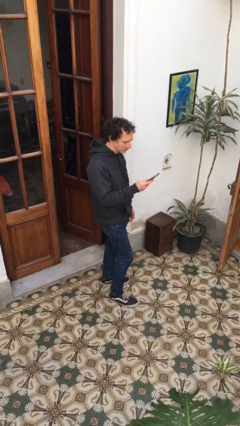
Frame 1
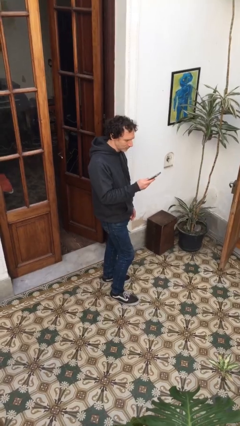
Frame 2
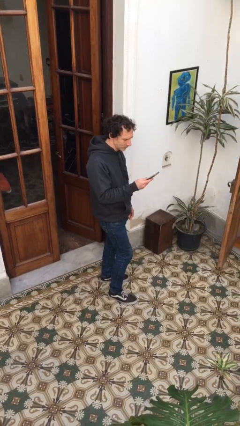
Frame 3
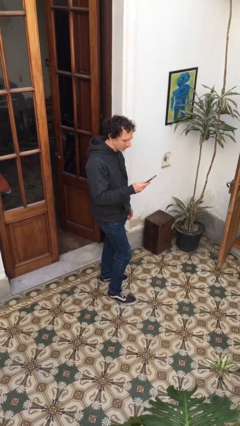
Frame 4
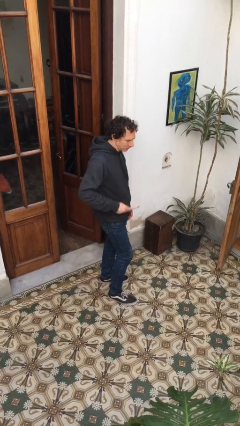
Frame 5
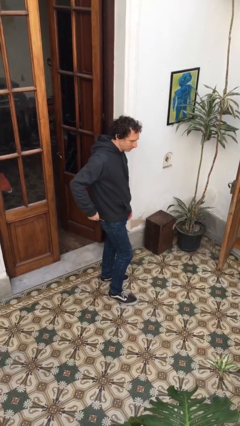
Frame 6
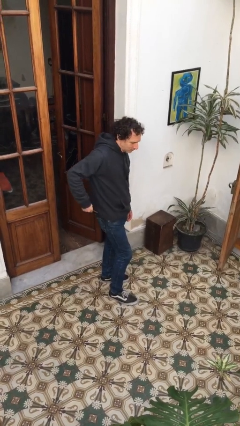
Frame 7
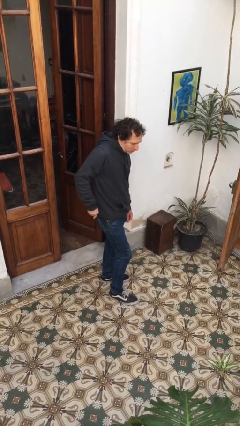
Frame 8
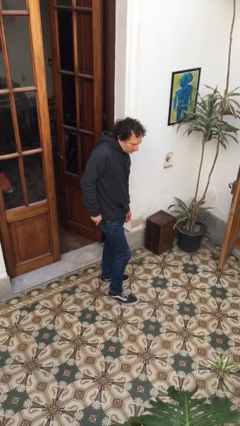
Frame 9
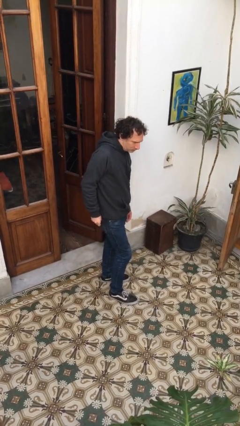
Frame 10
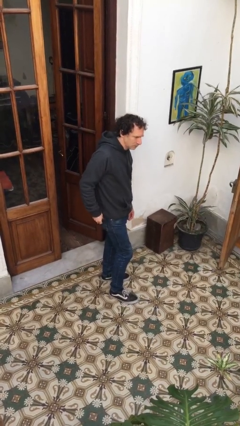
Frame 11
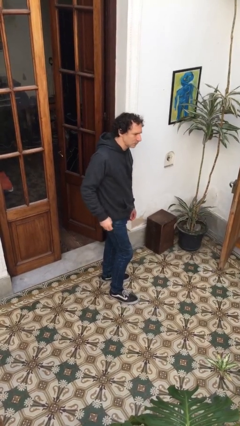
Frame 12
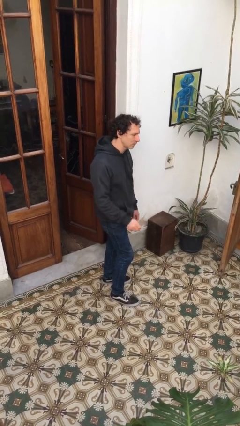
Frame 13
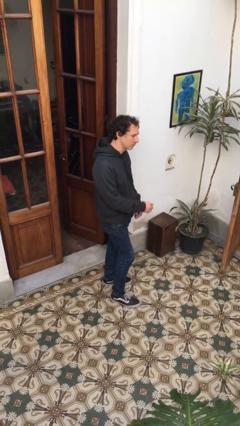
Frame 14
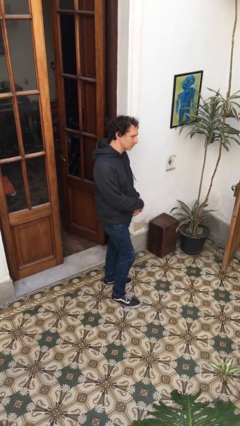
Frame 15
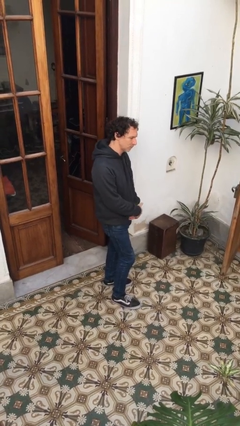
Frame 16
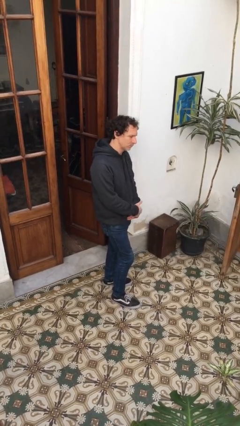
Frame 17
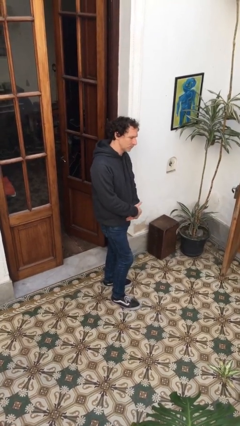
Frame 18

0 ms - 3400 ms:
person puts phone into pocket

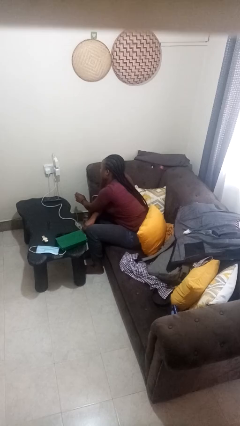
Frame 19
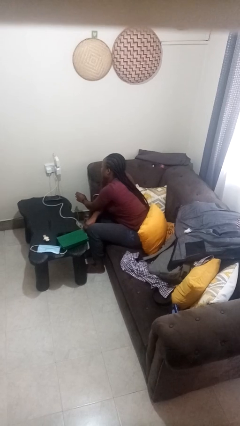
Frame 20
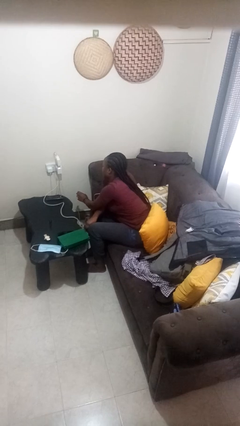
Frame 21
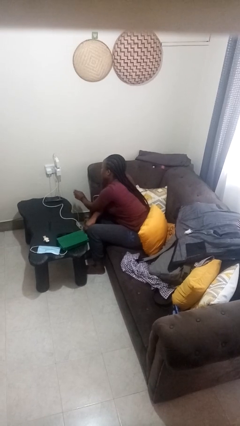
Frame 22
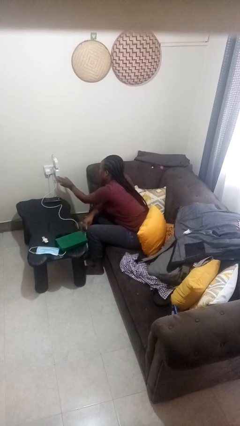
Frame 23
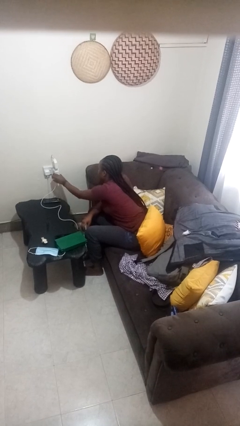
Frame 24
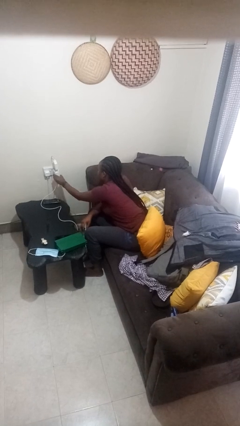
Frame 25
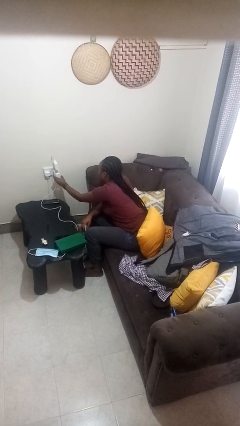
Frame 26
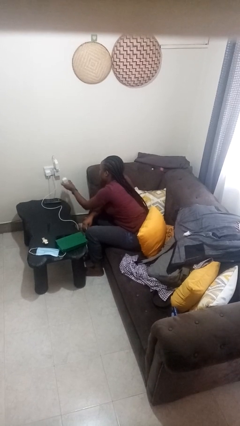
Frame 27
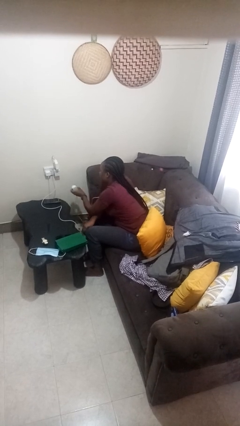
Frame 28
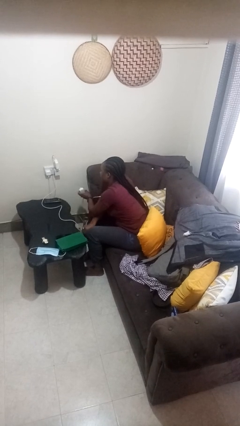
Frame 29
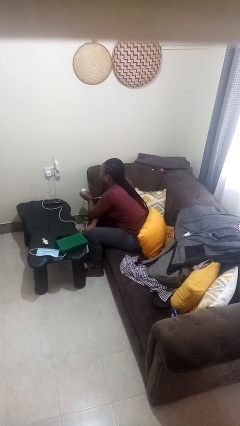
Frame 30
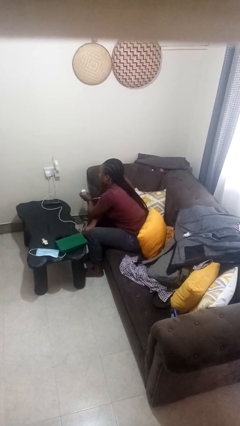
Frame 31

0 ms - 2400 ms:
person unplugs from electrical socket

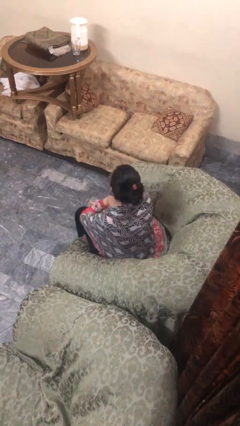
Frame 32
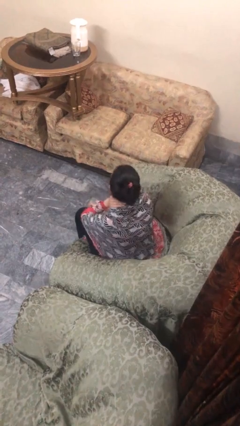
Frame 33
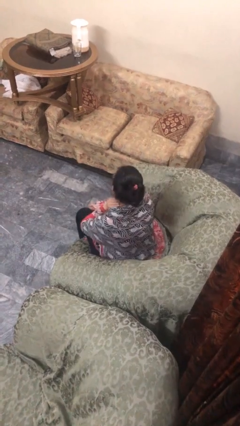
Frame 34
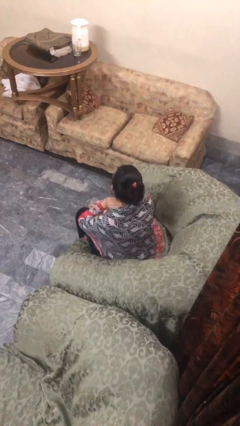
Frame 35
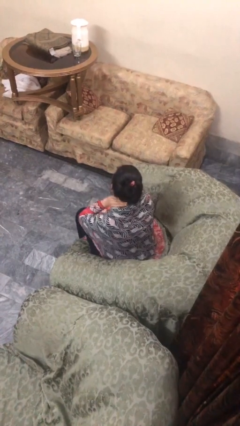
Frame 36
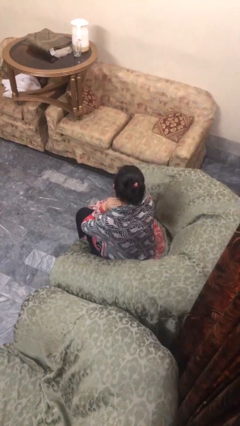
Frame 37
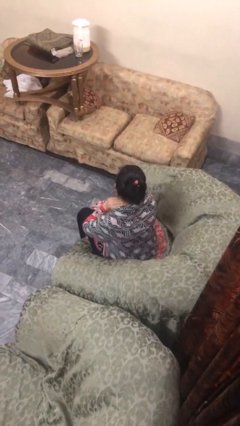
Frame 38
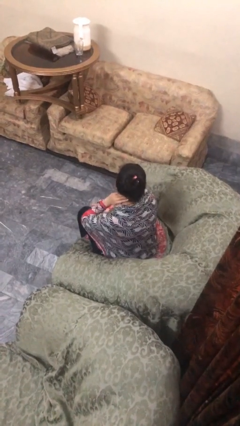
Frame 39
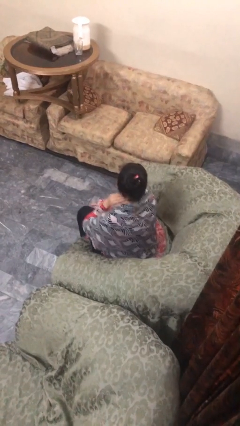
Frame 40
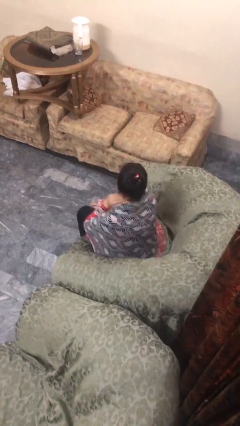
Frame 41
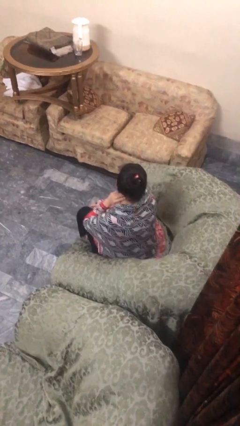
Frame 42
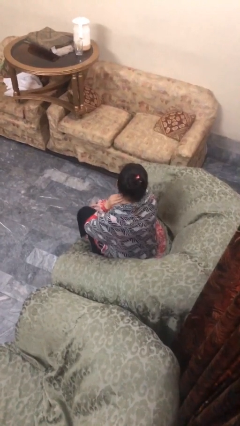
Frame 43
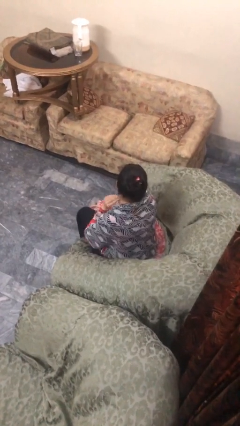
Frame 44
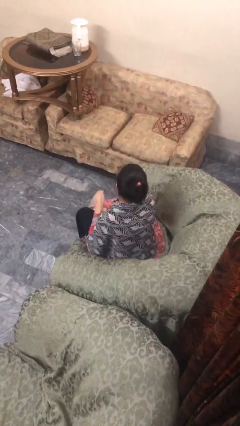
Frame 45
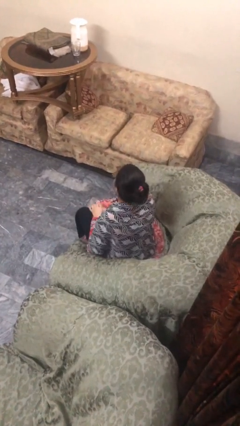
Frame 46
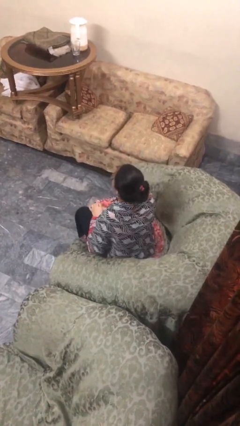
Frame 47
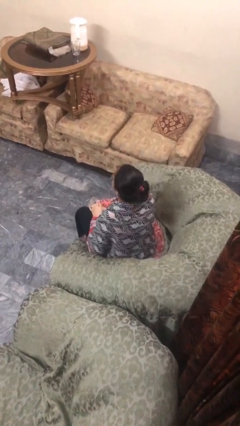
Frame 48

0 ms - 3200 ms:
person rubs neck

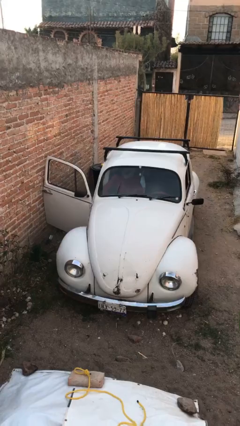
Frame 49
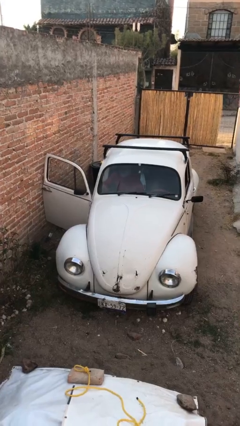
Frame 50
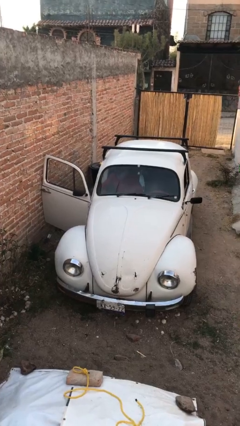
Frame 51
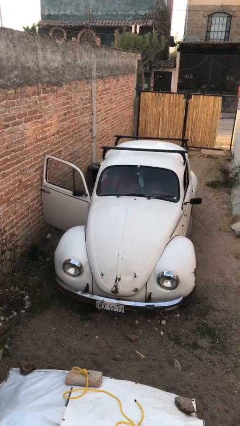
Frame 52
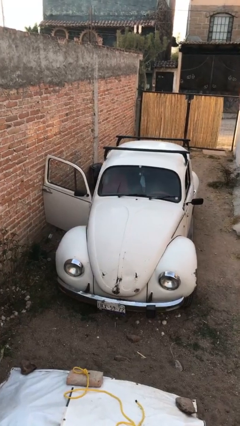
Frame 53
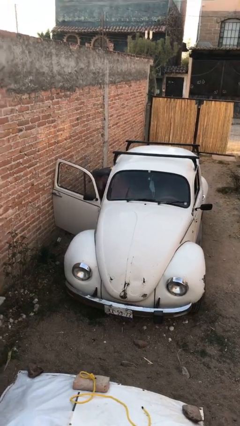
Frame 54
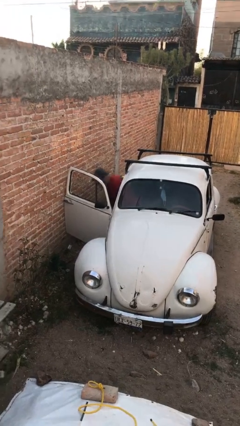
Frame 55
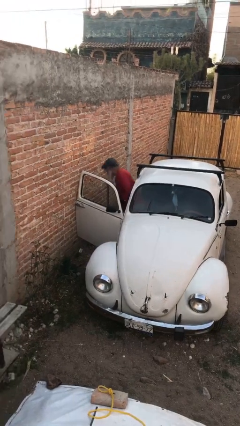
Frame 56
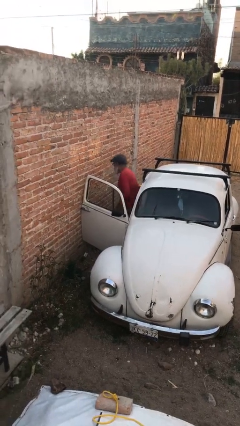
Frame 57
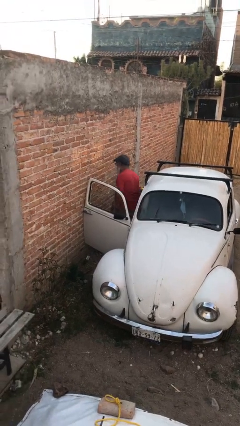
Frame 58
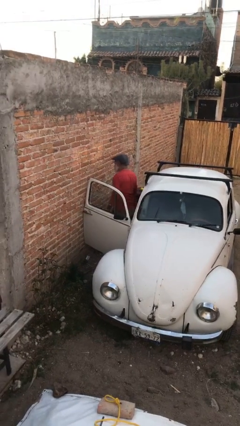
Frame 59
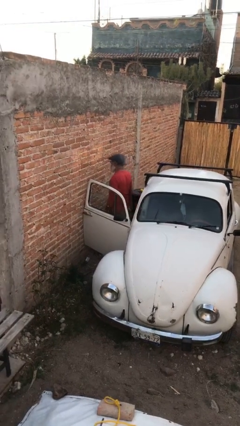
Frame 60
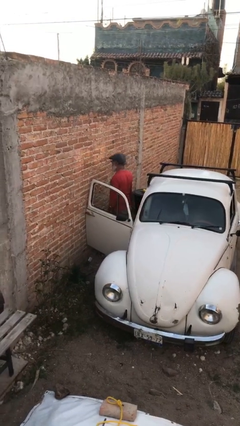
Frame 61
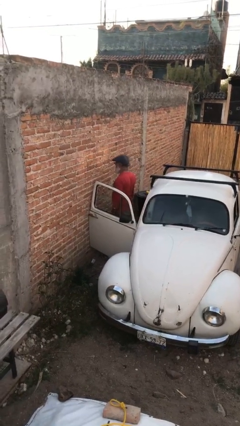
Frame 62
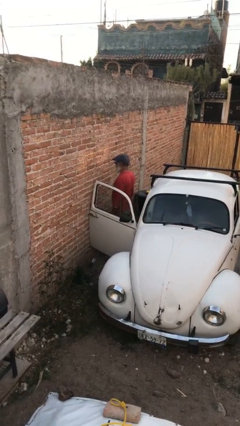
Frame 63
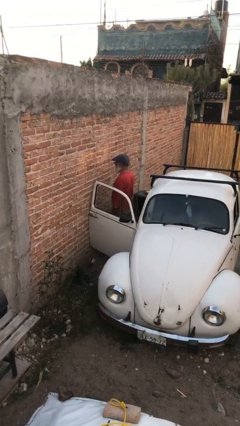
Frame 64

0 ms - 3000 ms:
person exits car

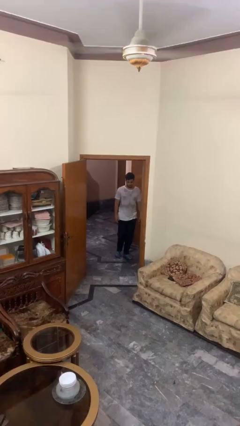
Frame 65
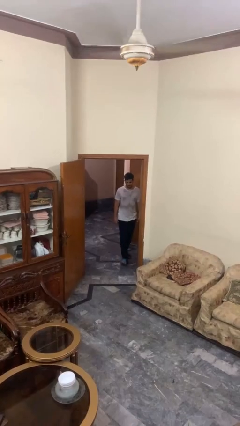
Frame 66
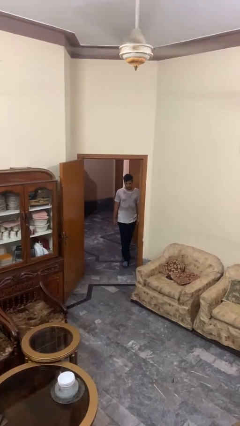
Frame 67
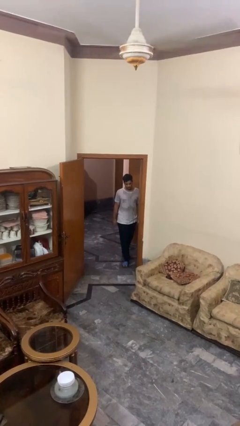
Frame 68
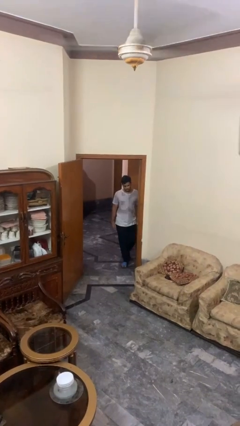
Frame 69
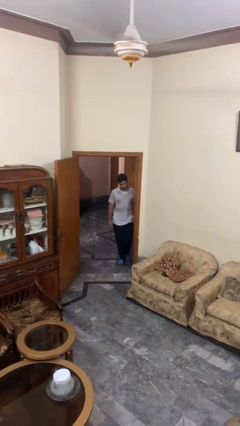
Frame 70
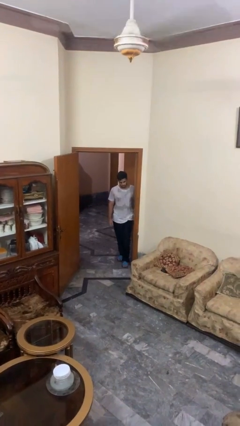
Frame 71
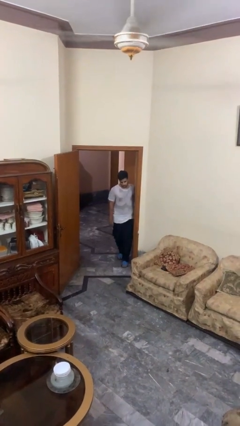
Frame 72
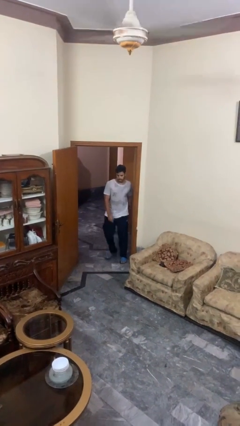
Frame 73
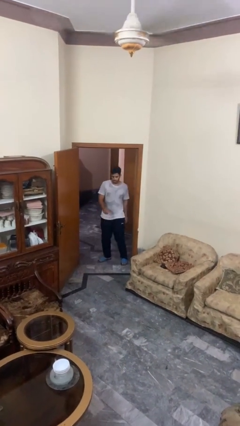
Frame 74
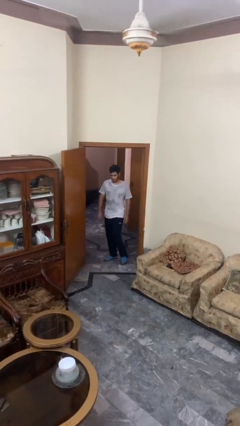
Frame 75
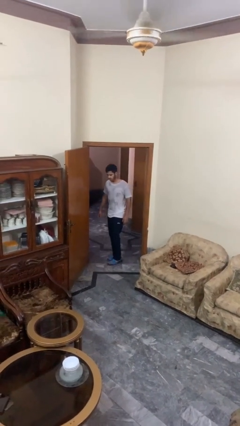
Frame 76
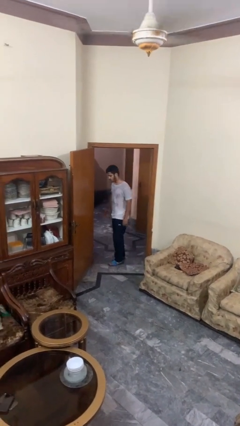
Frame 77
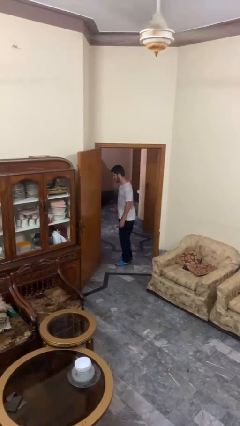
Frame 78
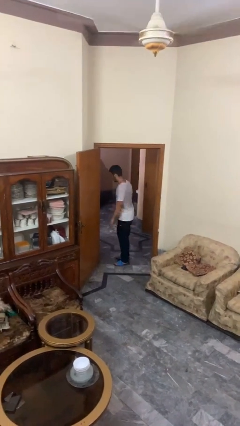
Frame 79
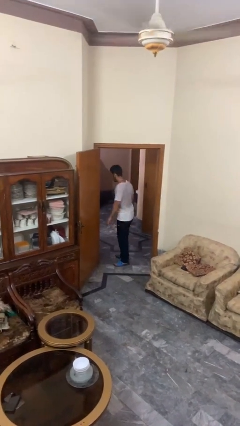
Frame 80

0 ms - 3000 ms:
person bumps into wall

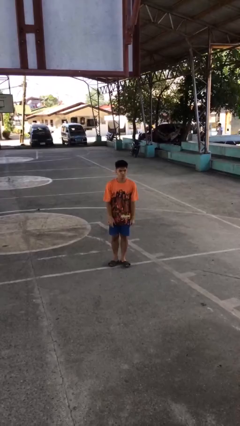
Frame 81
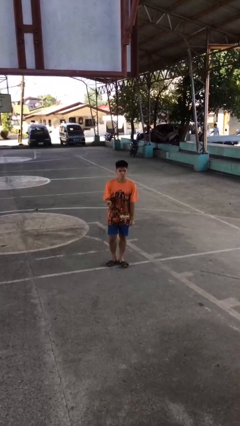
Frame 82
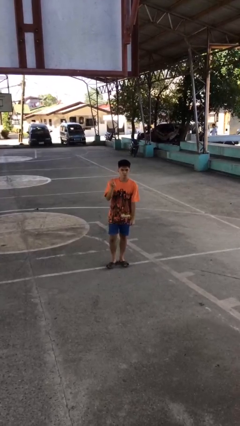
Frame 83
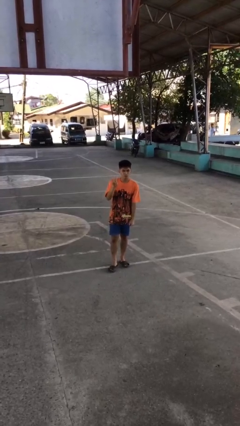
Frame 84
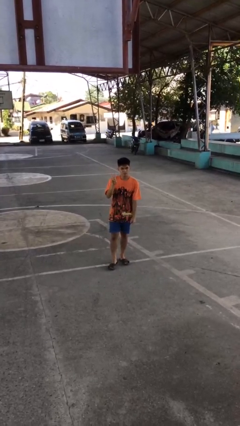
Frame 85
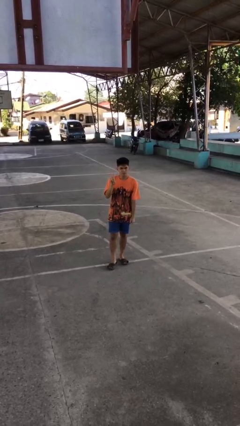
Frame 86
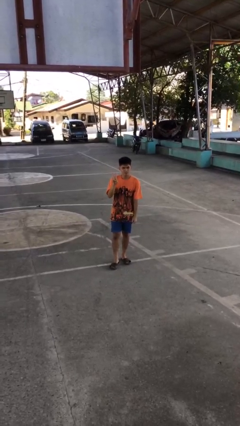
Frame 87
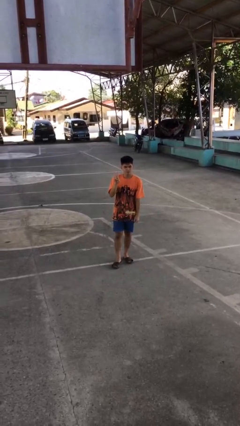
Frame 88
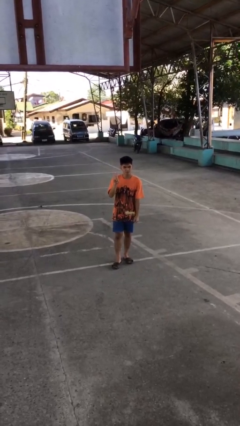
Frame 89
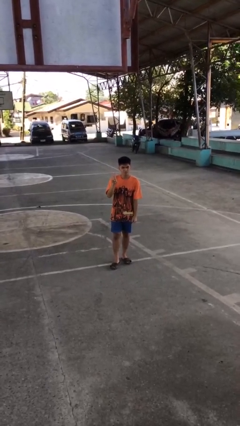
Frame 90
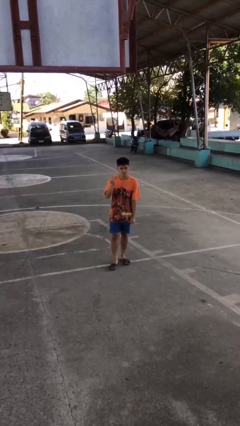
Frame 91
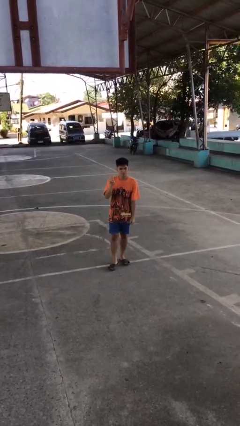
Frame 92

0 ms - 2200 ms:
person gestures peace

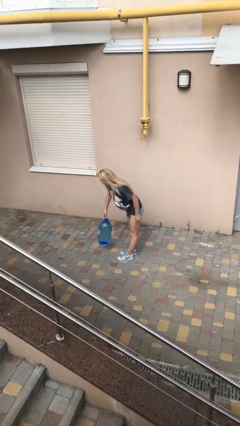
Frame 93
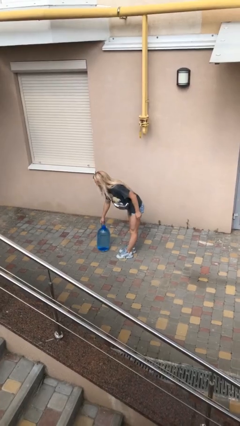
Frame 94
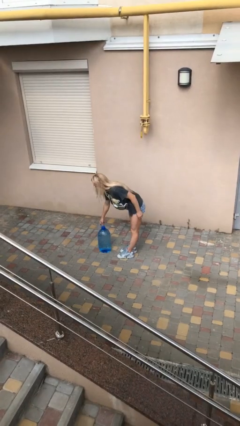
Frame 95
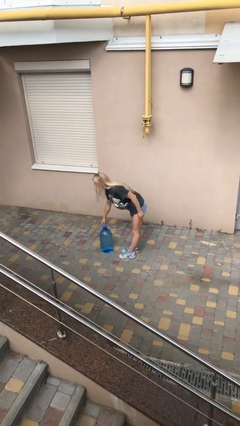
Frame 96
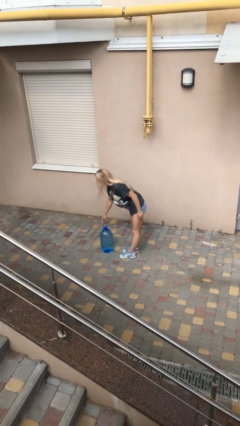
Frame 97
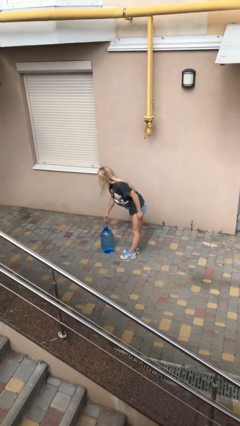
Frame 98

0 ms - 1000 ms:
person puts down object on floor
